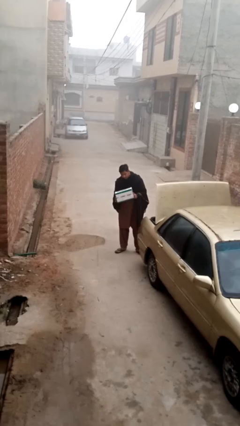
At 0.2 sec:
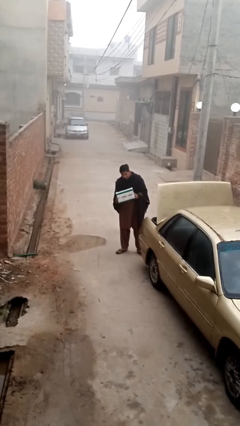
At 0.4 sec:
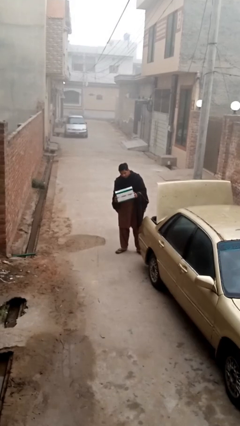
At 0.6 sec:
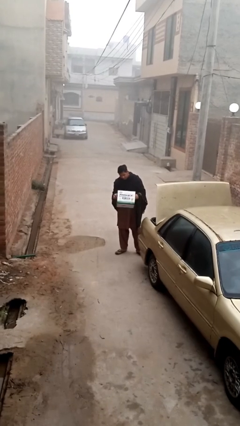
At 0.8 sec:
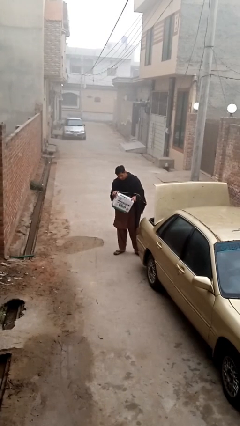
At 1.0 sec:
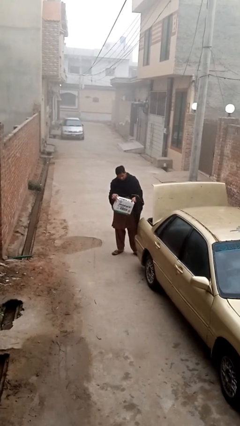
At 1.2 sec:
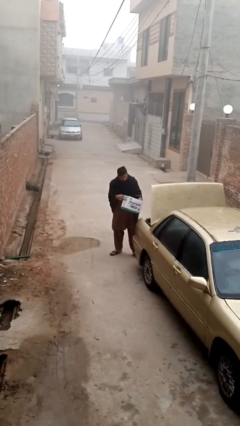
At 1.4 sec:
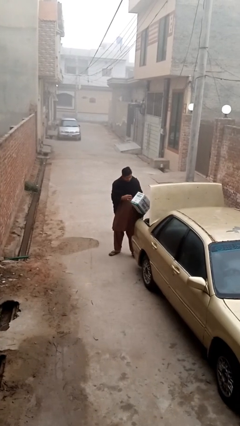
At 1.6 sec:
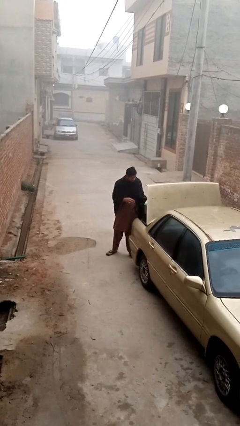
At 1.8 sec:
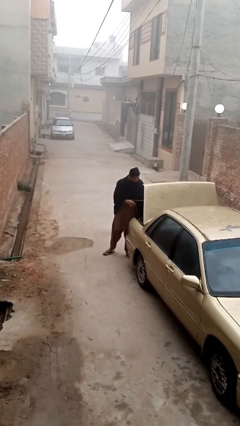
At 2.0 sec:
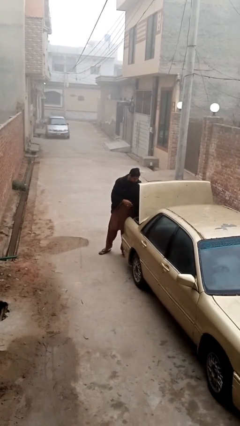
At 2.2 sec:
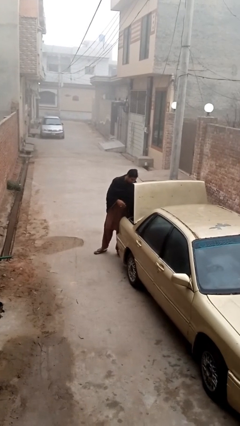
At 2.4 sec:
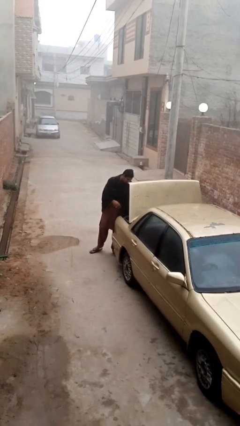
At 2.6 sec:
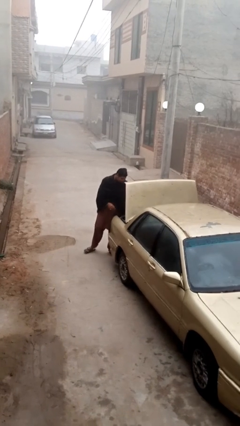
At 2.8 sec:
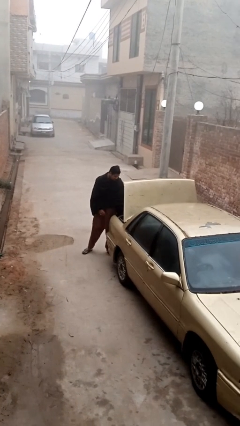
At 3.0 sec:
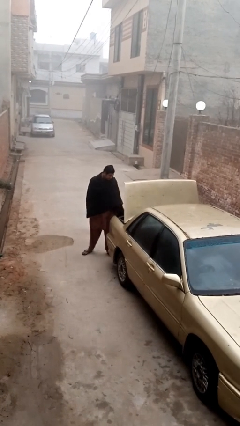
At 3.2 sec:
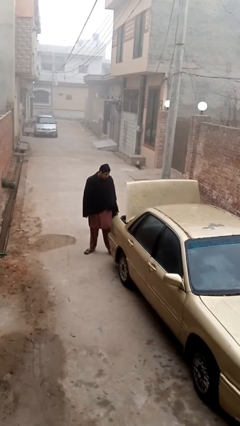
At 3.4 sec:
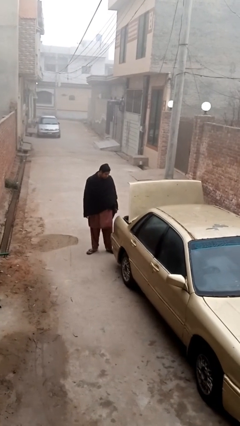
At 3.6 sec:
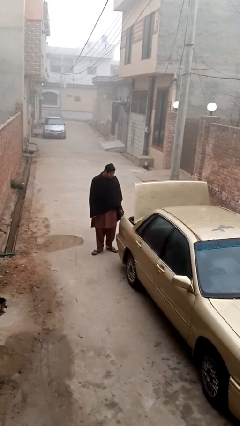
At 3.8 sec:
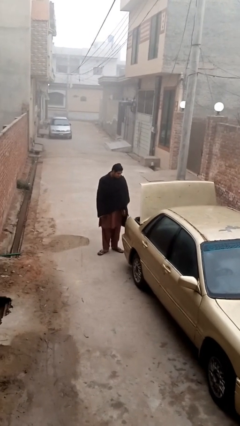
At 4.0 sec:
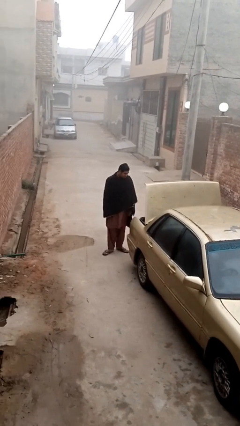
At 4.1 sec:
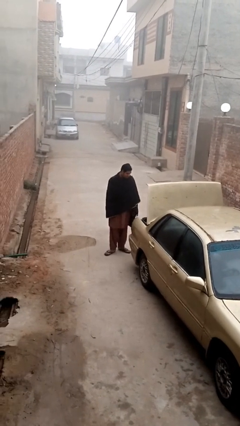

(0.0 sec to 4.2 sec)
person loads car

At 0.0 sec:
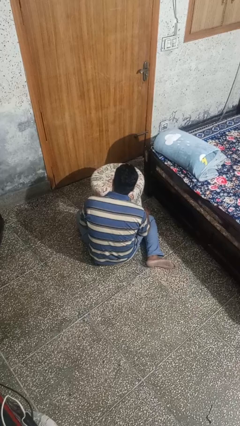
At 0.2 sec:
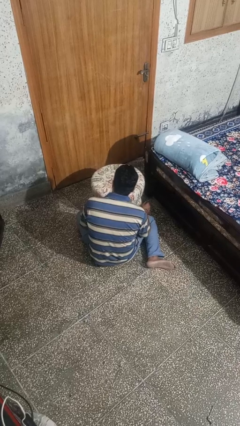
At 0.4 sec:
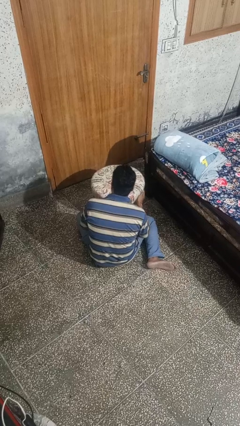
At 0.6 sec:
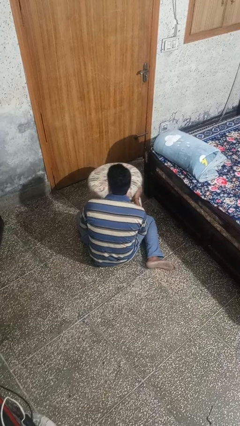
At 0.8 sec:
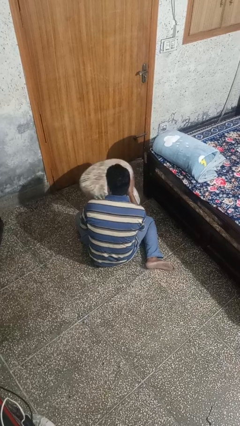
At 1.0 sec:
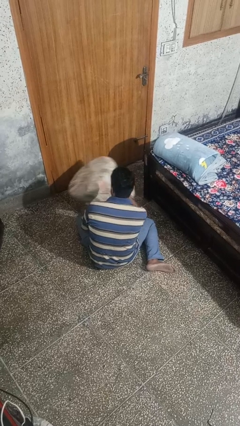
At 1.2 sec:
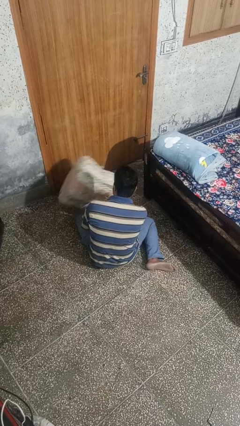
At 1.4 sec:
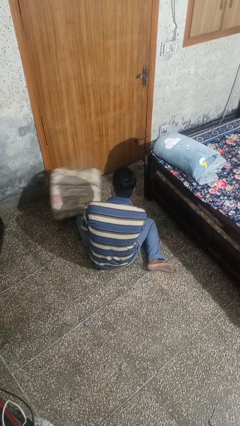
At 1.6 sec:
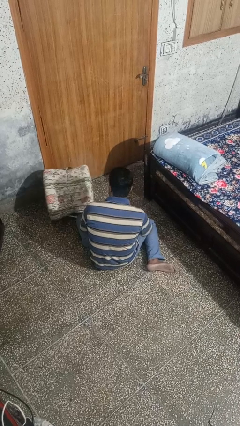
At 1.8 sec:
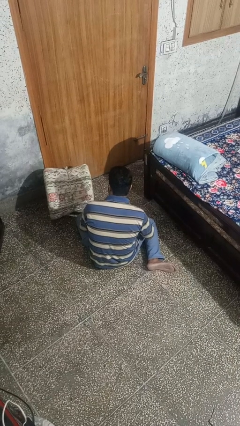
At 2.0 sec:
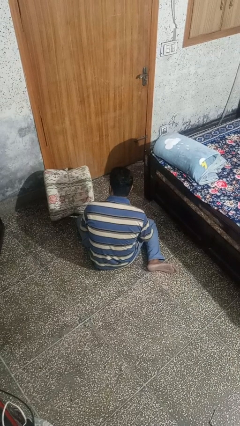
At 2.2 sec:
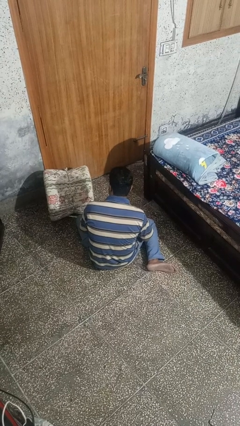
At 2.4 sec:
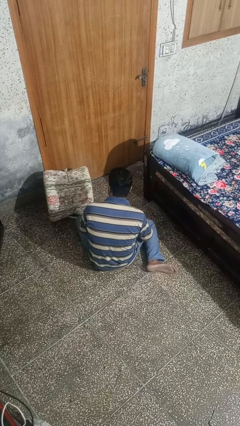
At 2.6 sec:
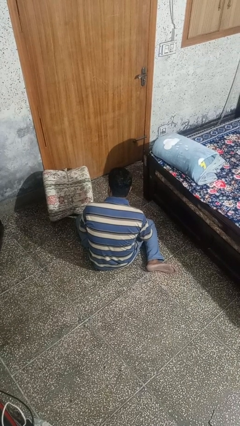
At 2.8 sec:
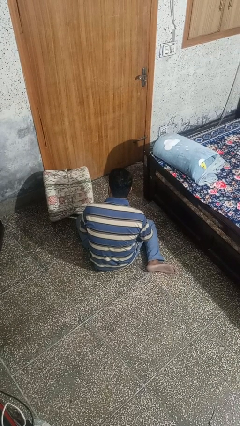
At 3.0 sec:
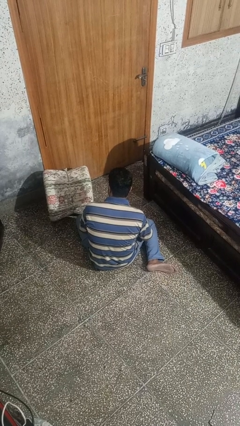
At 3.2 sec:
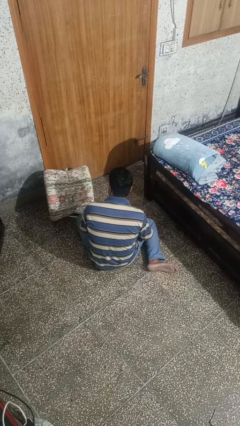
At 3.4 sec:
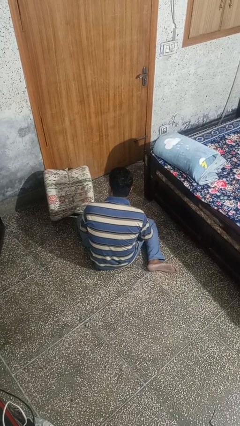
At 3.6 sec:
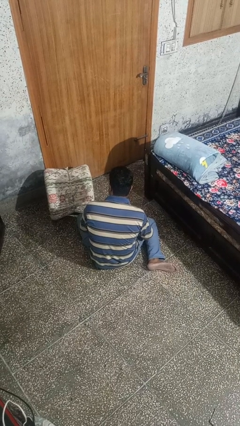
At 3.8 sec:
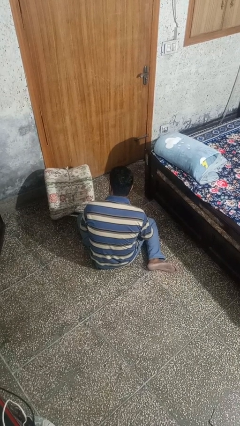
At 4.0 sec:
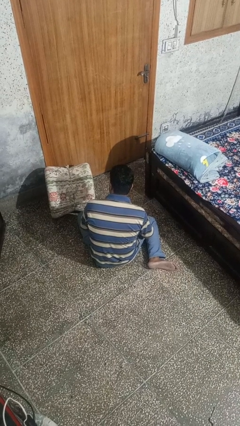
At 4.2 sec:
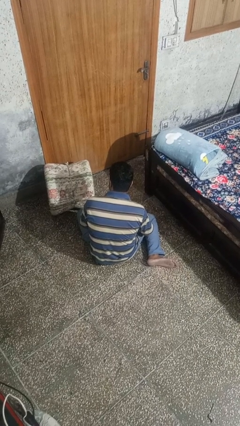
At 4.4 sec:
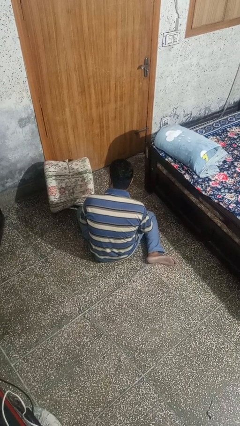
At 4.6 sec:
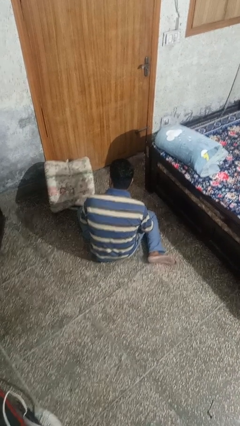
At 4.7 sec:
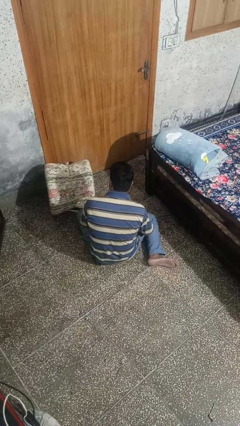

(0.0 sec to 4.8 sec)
person knocks over furniture

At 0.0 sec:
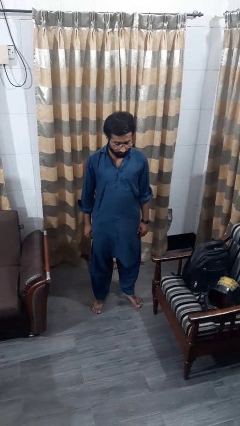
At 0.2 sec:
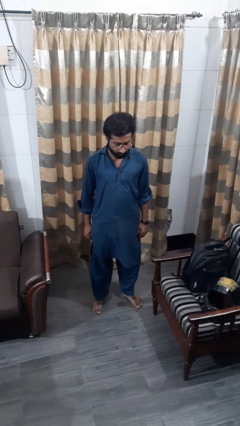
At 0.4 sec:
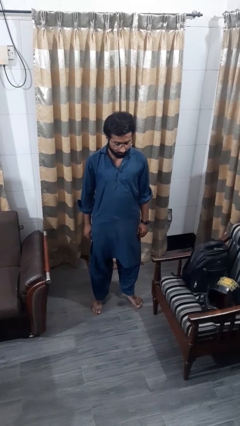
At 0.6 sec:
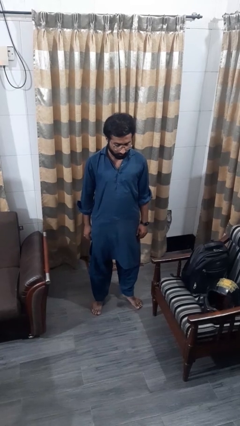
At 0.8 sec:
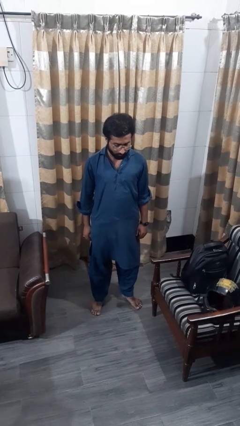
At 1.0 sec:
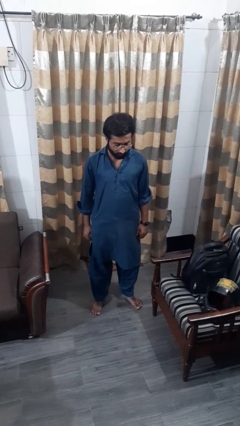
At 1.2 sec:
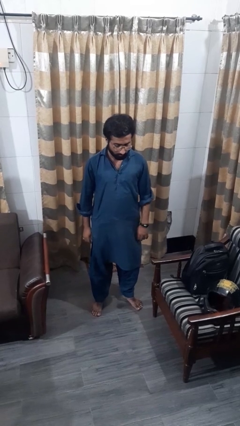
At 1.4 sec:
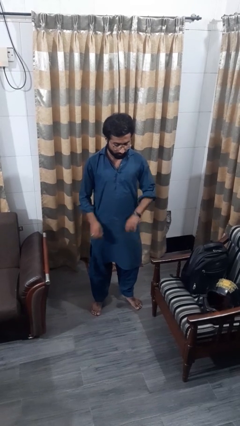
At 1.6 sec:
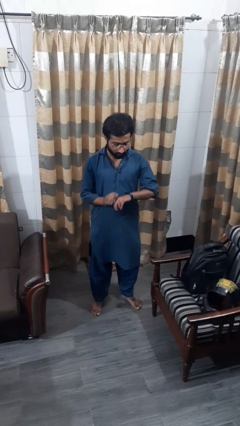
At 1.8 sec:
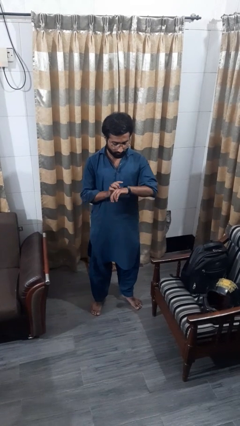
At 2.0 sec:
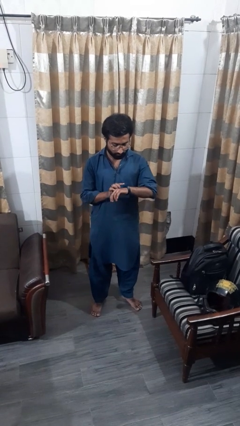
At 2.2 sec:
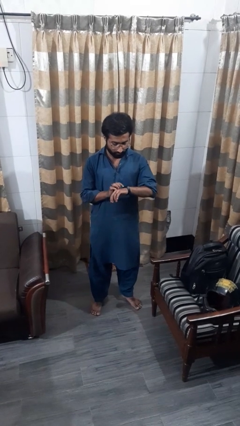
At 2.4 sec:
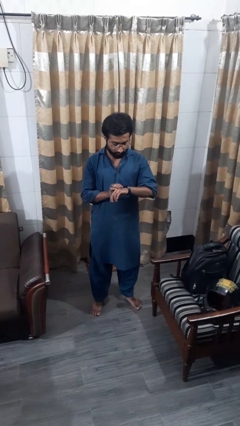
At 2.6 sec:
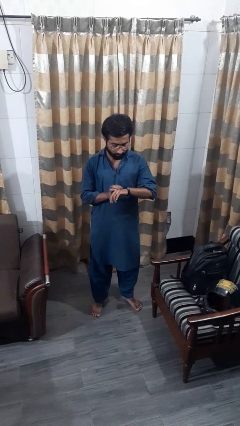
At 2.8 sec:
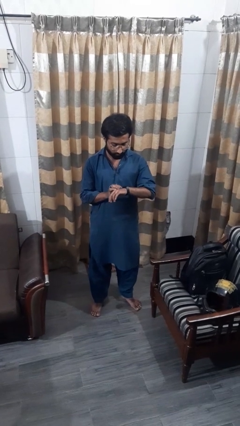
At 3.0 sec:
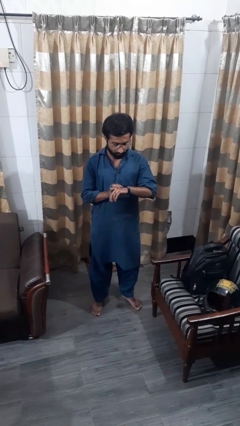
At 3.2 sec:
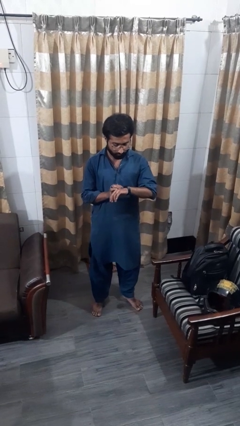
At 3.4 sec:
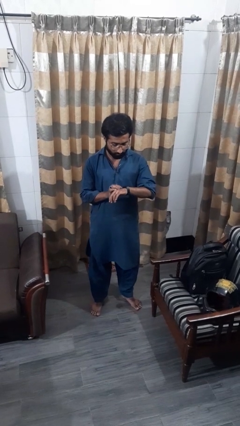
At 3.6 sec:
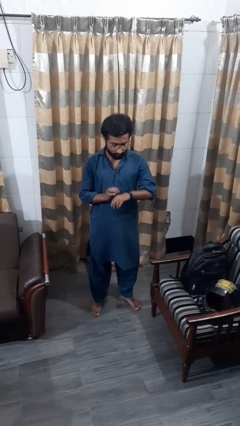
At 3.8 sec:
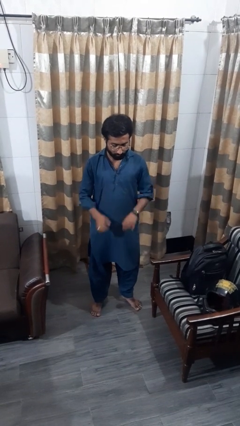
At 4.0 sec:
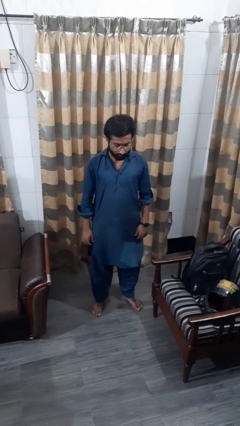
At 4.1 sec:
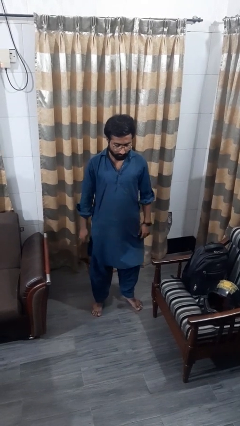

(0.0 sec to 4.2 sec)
person looks at wristwatch

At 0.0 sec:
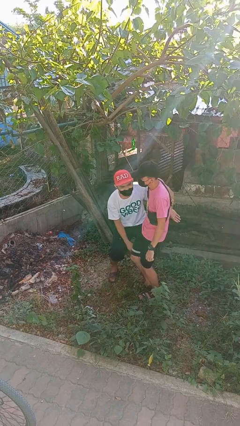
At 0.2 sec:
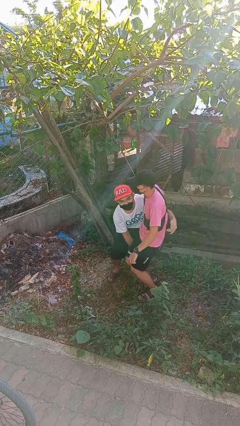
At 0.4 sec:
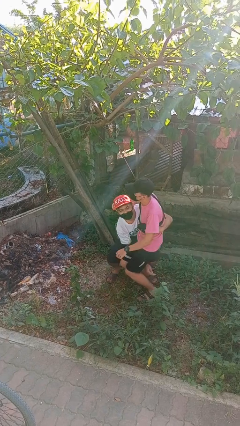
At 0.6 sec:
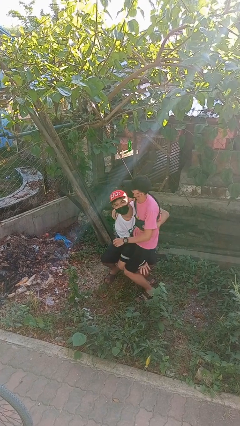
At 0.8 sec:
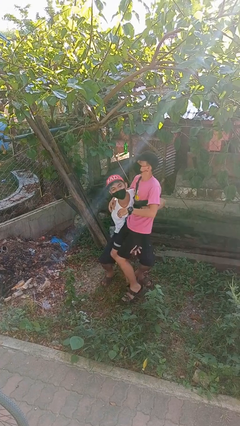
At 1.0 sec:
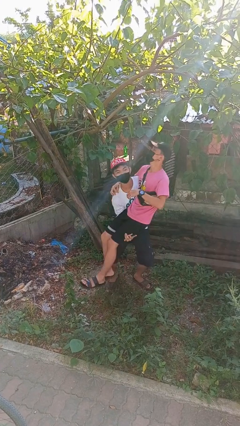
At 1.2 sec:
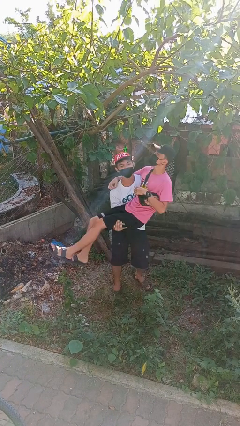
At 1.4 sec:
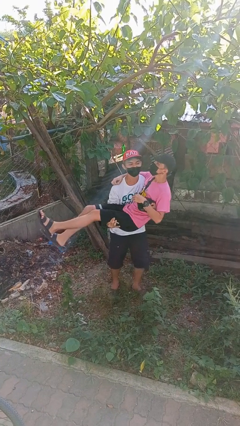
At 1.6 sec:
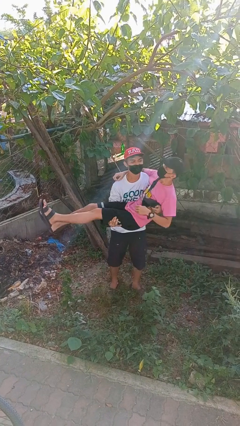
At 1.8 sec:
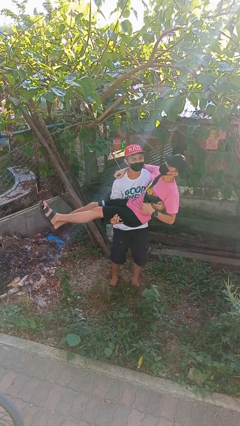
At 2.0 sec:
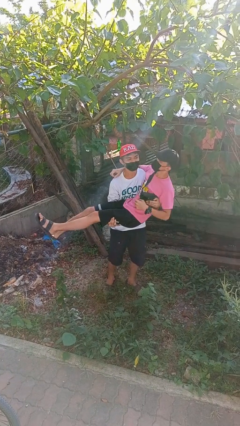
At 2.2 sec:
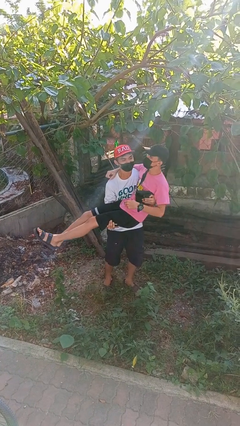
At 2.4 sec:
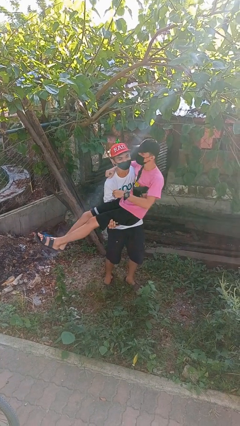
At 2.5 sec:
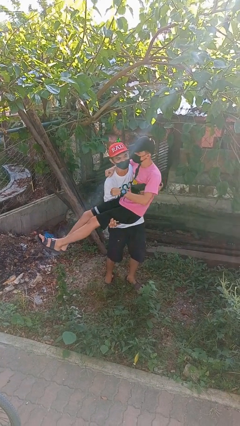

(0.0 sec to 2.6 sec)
person picks up person

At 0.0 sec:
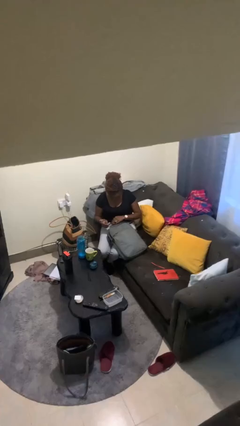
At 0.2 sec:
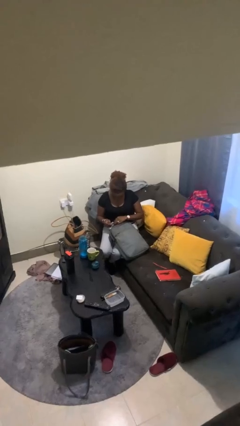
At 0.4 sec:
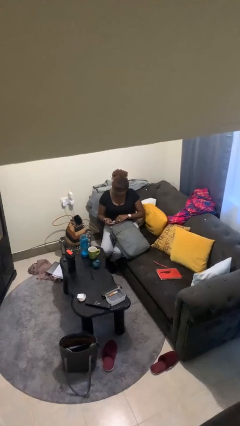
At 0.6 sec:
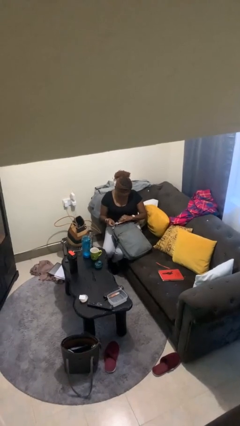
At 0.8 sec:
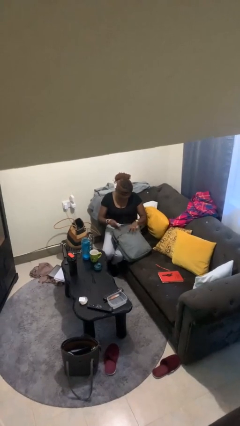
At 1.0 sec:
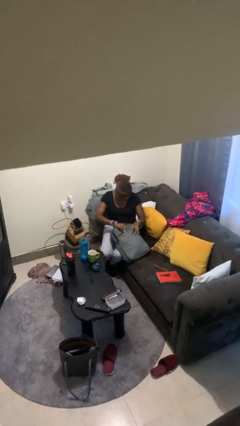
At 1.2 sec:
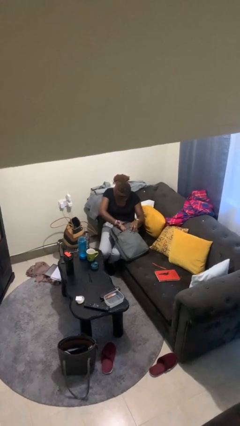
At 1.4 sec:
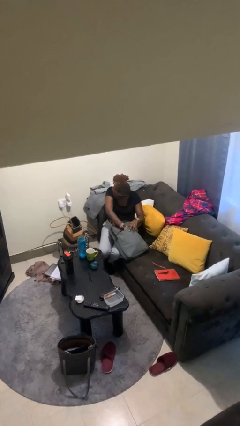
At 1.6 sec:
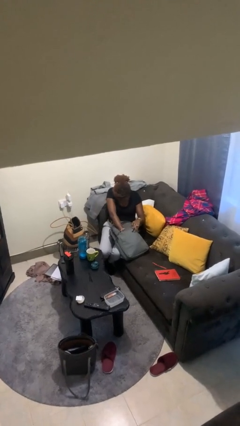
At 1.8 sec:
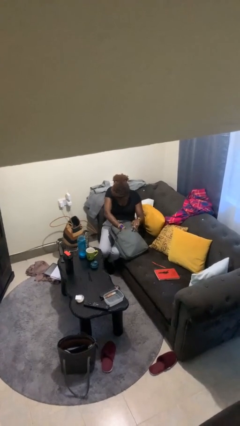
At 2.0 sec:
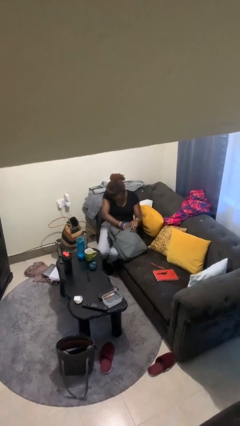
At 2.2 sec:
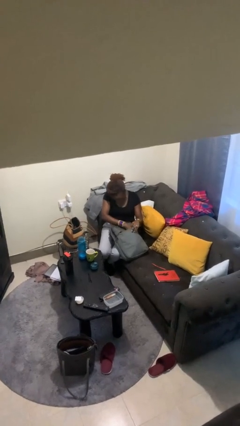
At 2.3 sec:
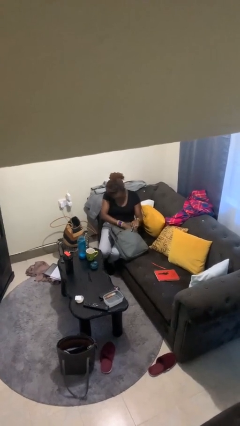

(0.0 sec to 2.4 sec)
person puts object into backpack
